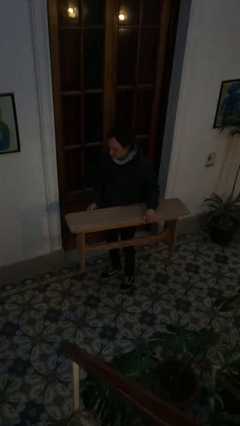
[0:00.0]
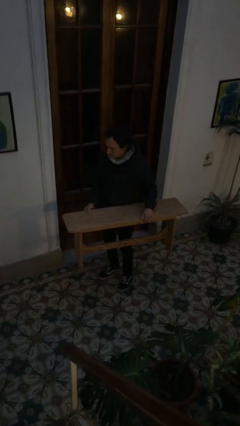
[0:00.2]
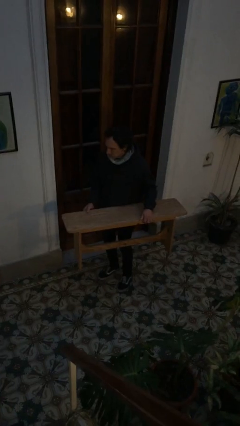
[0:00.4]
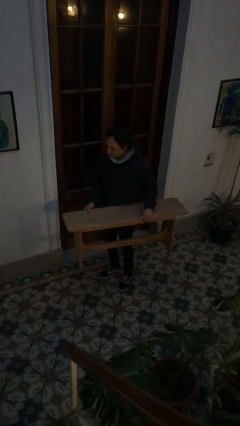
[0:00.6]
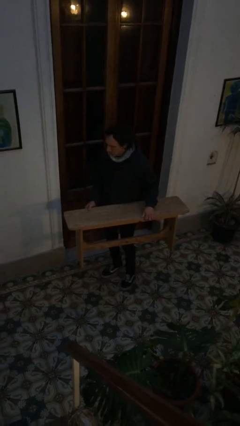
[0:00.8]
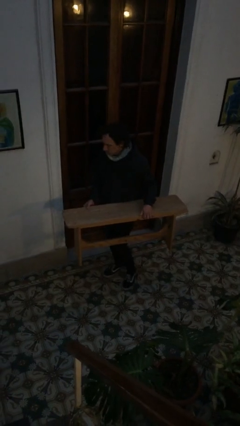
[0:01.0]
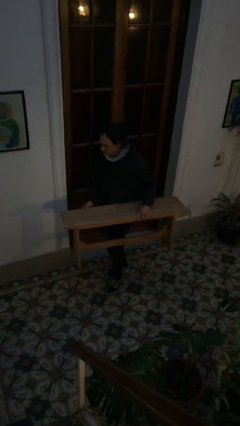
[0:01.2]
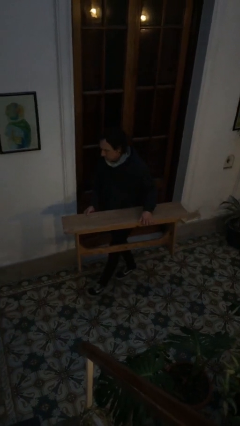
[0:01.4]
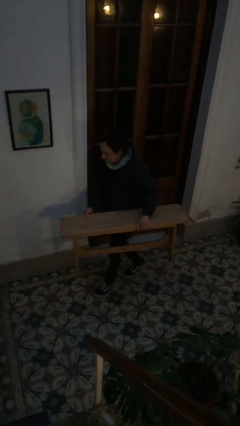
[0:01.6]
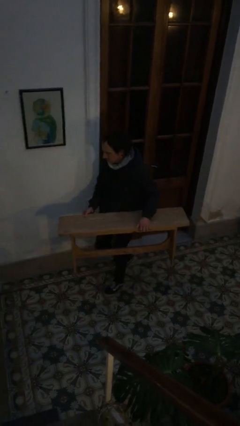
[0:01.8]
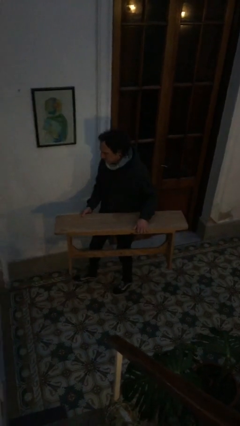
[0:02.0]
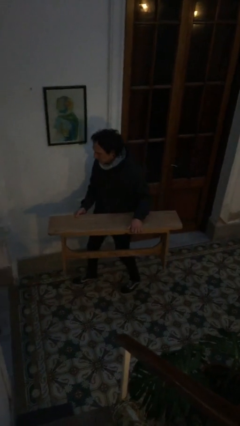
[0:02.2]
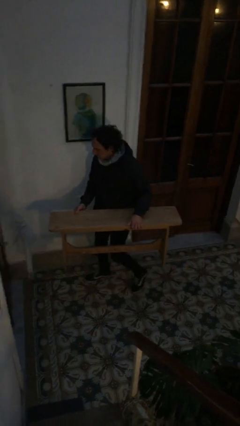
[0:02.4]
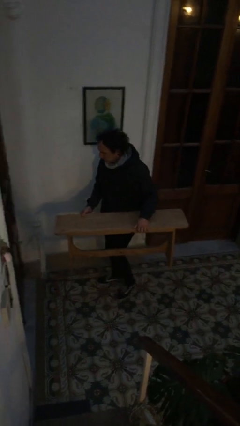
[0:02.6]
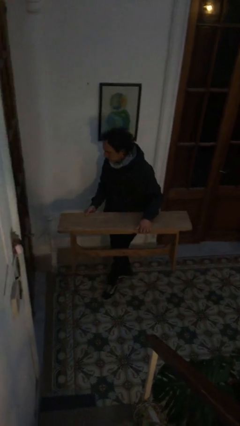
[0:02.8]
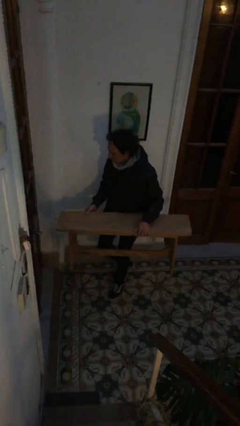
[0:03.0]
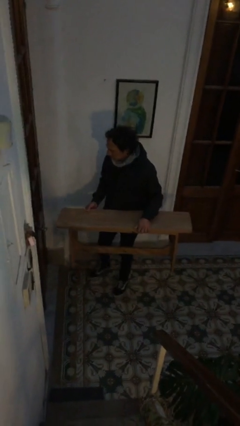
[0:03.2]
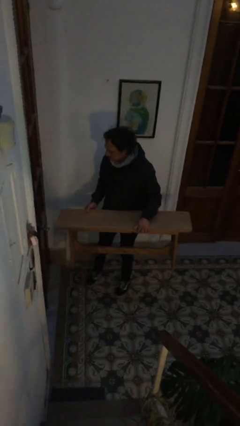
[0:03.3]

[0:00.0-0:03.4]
person carries furniture

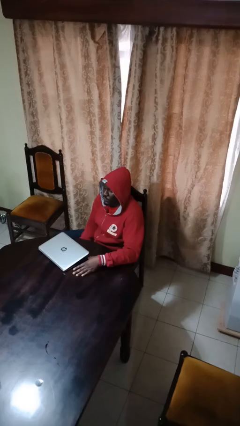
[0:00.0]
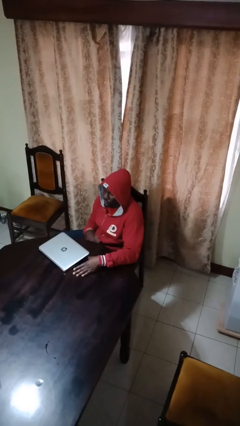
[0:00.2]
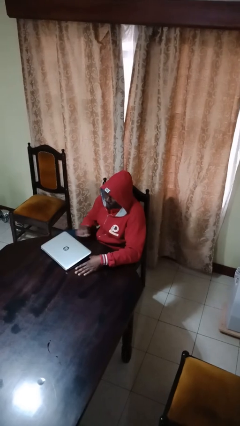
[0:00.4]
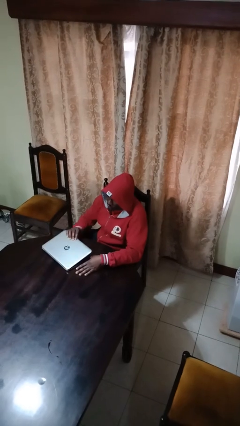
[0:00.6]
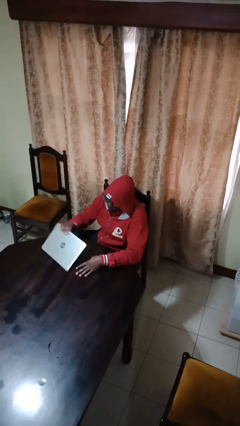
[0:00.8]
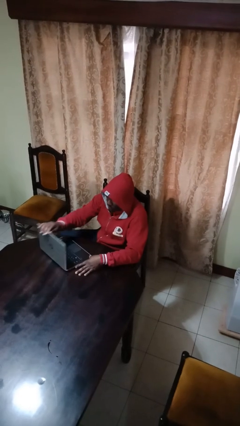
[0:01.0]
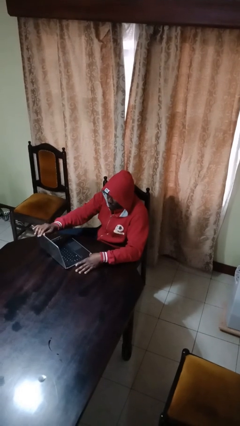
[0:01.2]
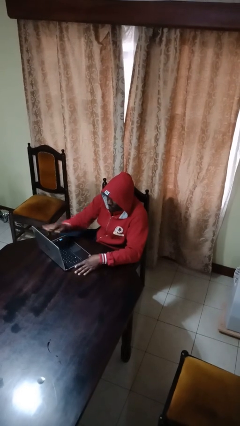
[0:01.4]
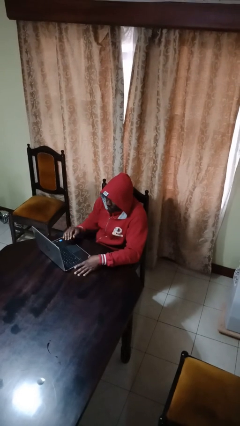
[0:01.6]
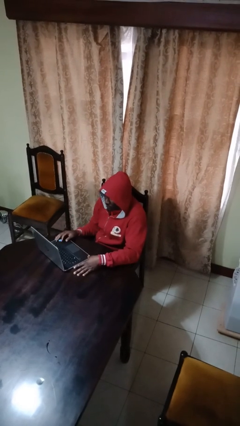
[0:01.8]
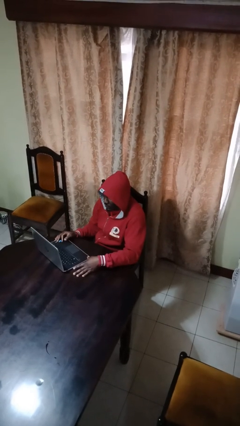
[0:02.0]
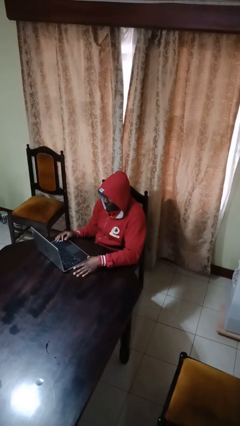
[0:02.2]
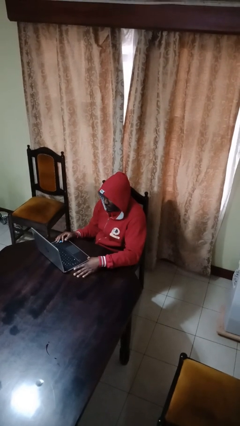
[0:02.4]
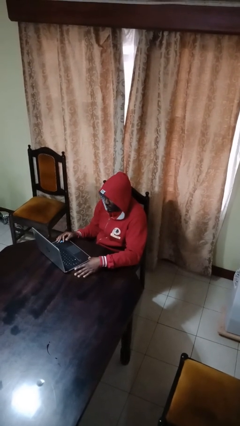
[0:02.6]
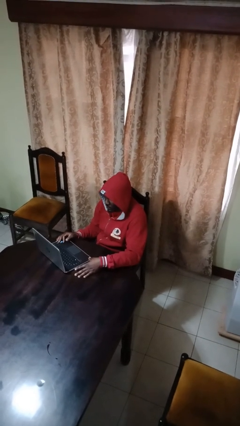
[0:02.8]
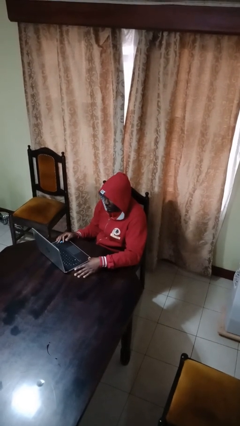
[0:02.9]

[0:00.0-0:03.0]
person opens laptop

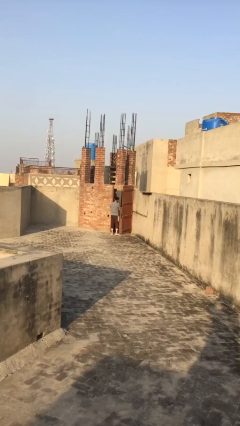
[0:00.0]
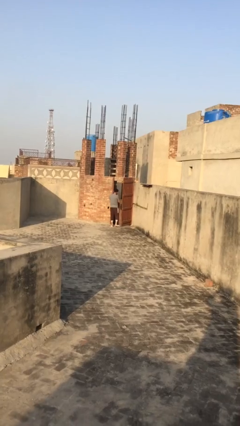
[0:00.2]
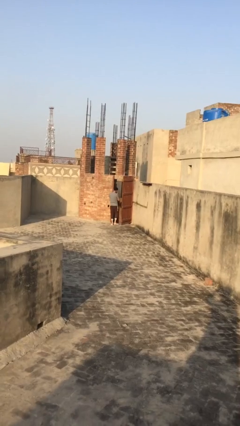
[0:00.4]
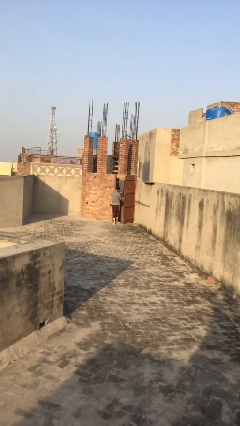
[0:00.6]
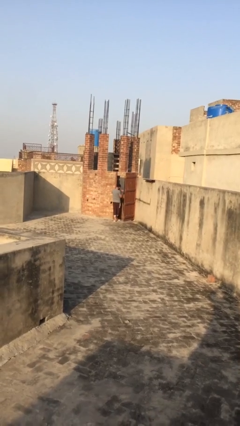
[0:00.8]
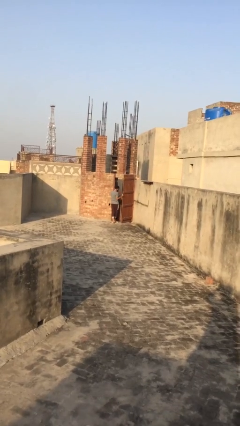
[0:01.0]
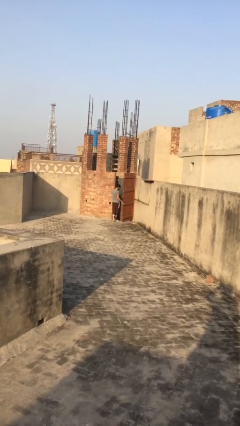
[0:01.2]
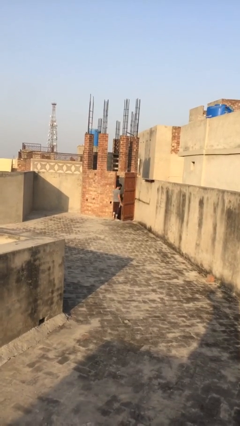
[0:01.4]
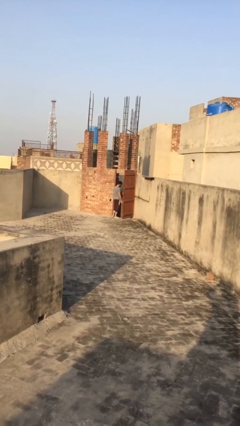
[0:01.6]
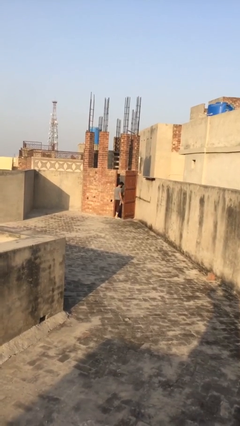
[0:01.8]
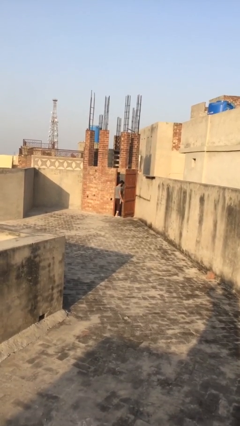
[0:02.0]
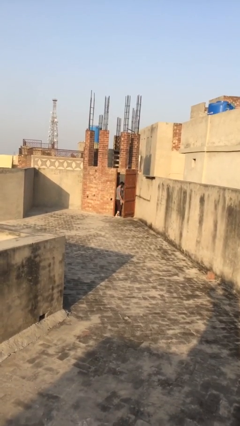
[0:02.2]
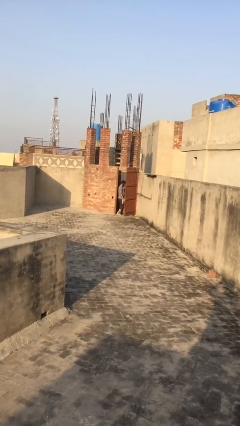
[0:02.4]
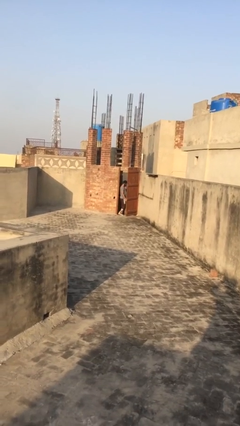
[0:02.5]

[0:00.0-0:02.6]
person exits scene through structure

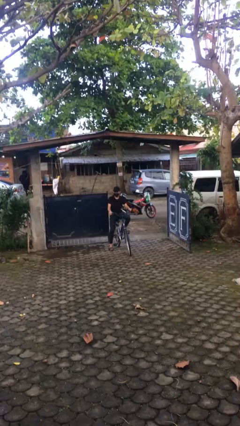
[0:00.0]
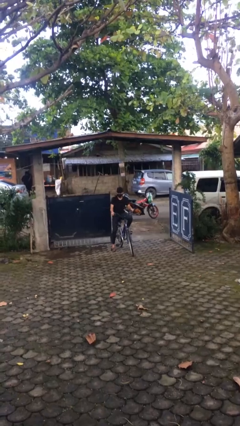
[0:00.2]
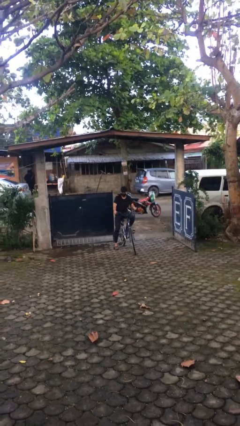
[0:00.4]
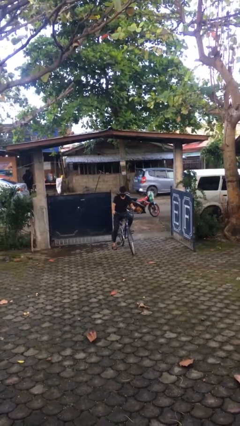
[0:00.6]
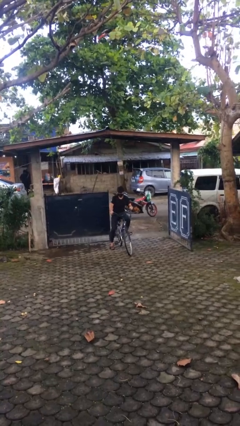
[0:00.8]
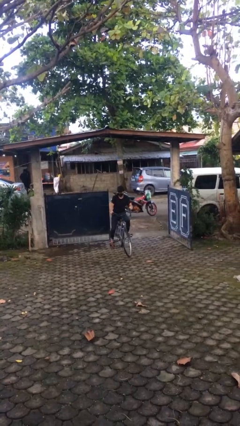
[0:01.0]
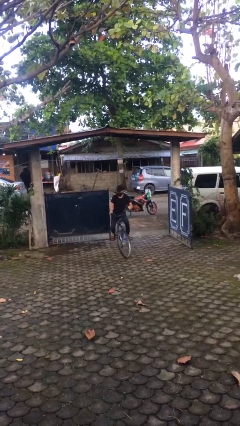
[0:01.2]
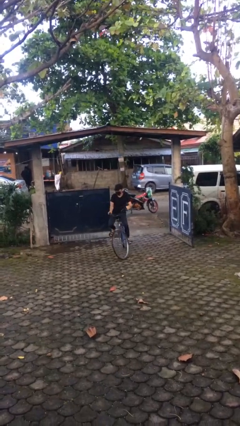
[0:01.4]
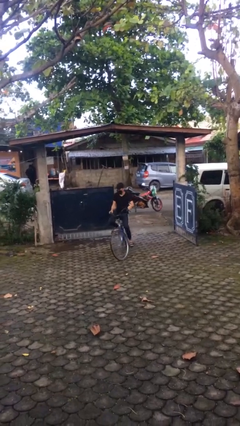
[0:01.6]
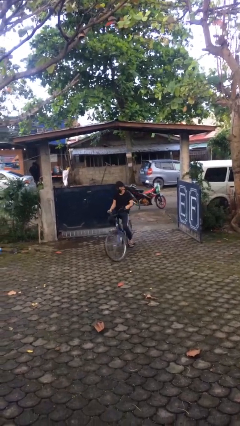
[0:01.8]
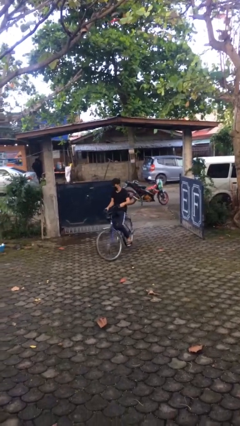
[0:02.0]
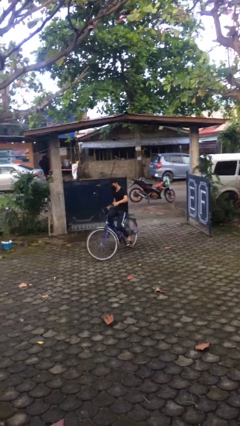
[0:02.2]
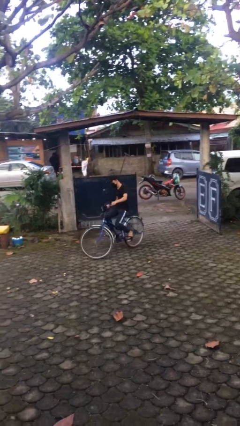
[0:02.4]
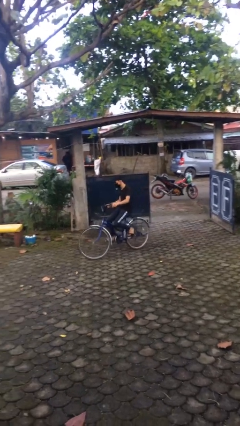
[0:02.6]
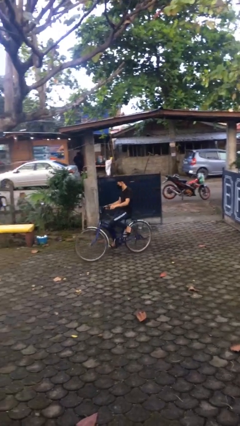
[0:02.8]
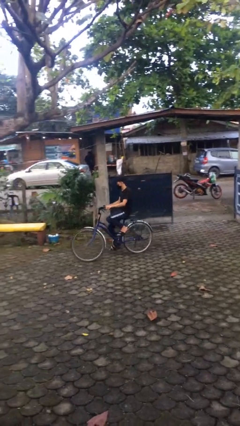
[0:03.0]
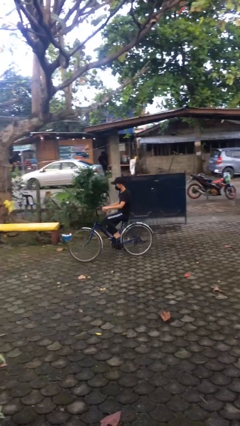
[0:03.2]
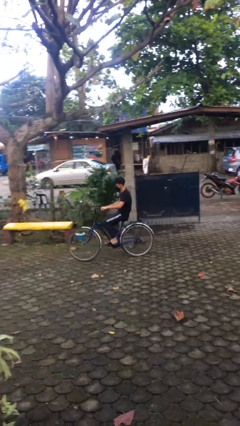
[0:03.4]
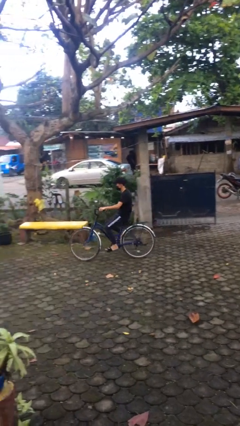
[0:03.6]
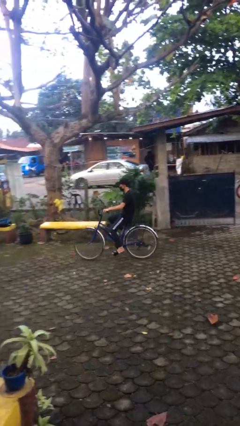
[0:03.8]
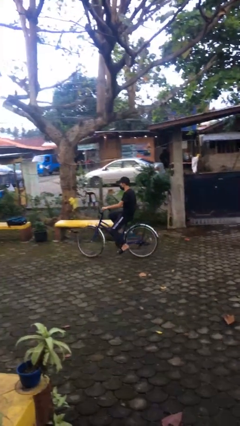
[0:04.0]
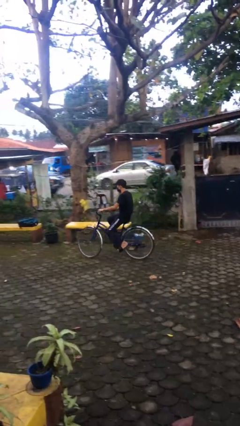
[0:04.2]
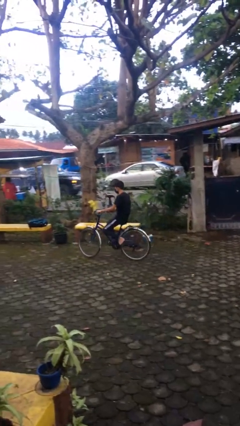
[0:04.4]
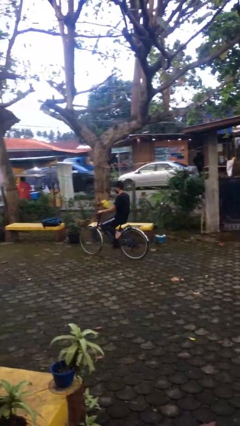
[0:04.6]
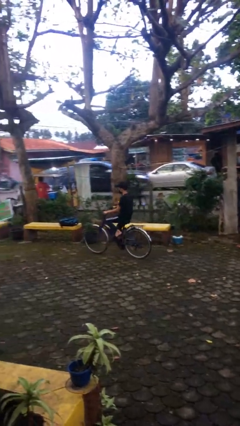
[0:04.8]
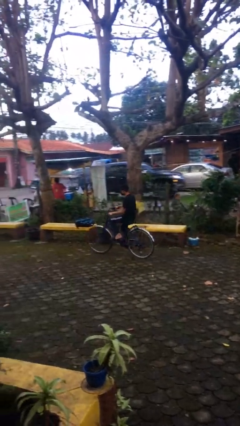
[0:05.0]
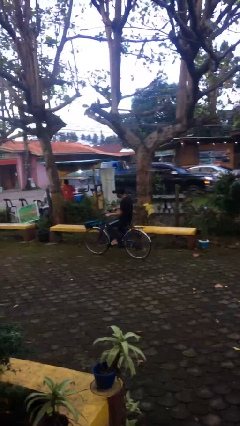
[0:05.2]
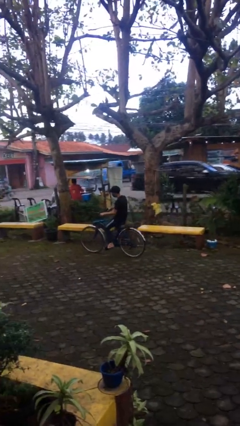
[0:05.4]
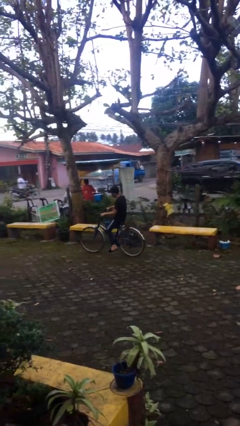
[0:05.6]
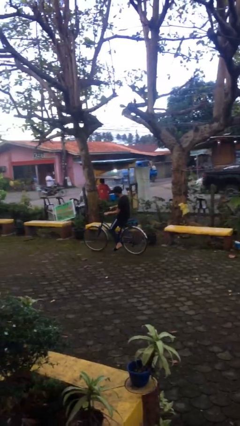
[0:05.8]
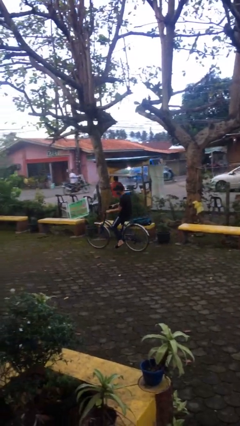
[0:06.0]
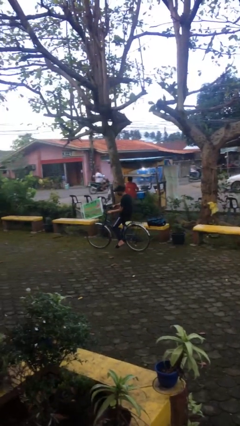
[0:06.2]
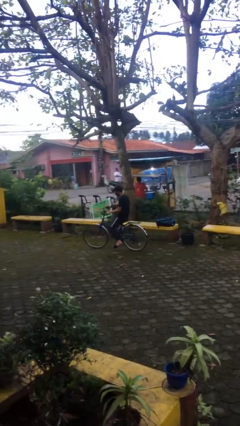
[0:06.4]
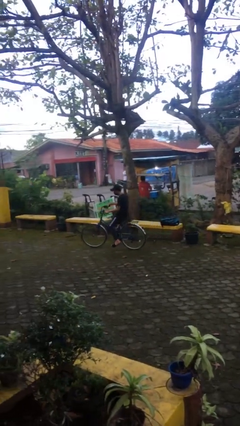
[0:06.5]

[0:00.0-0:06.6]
person rides bicycle

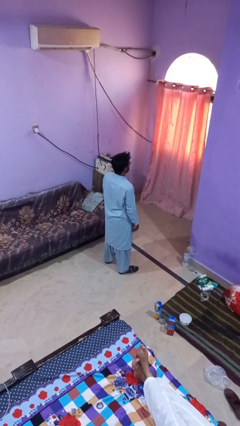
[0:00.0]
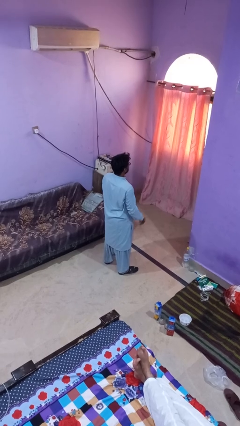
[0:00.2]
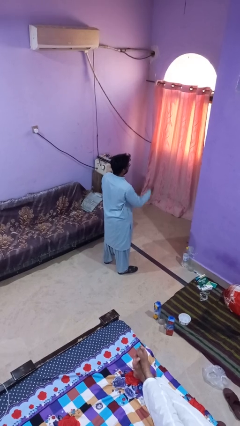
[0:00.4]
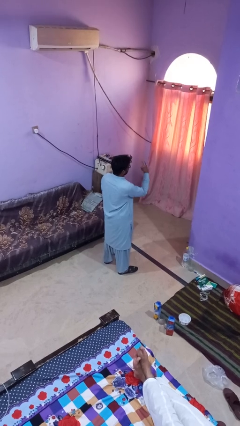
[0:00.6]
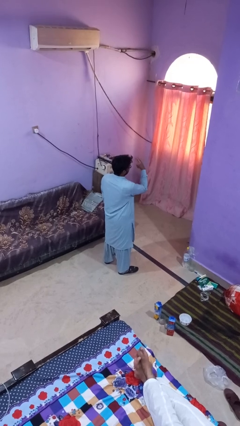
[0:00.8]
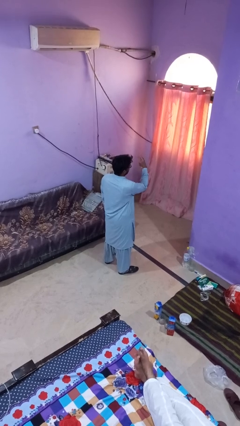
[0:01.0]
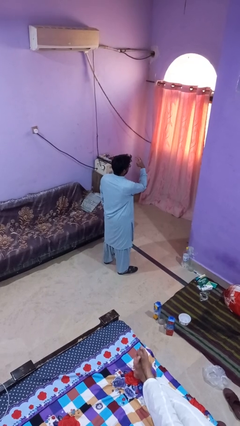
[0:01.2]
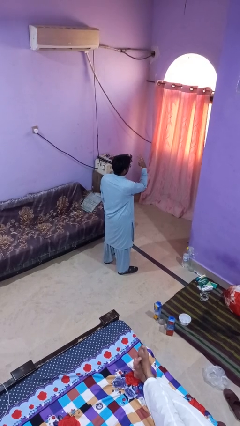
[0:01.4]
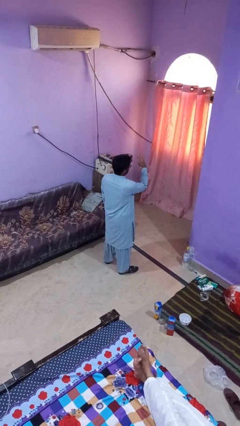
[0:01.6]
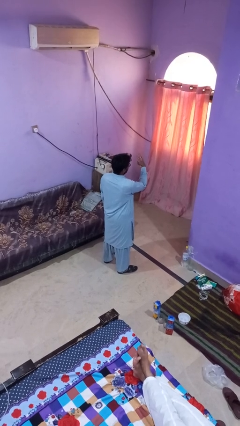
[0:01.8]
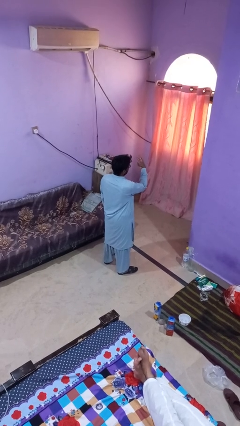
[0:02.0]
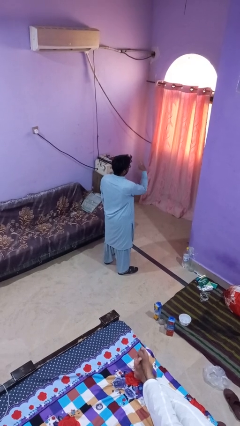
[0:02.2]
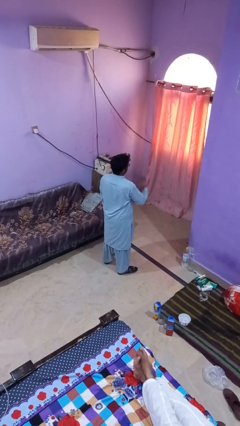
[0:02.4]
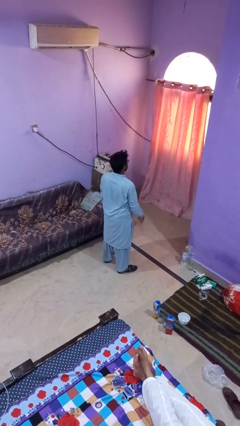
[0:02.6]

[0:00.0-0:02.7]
person gestures peace
